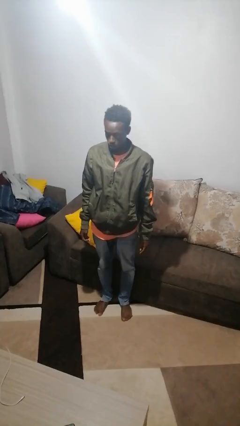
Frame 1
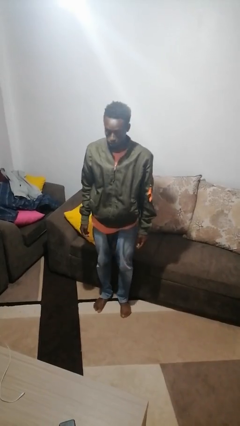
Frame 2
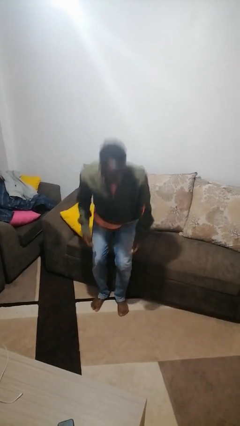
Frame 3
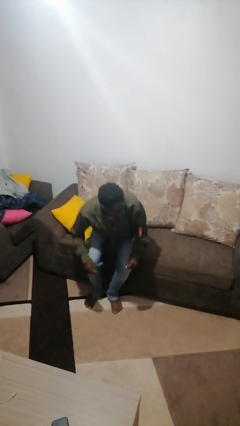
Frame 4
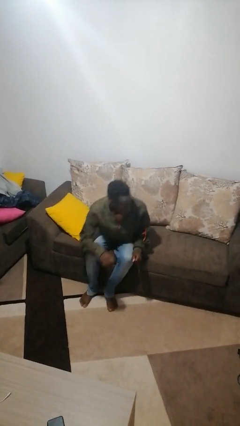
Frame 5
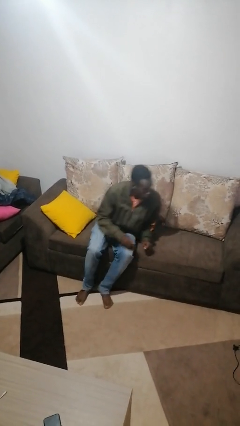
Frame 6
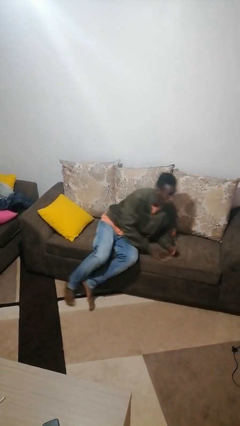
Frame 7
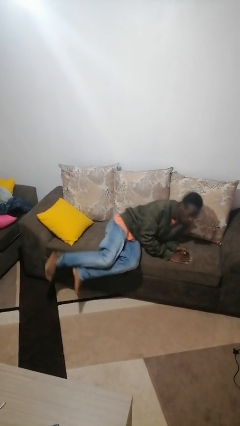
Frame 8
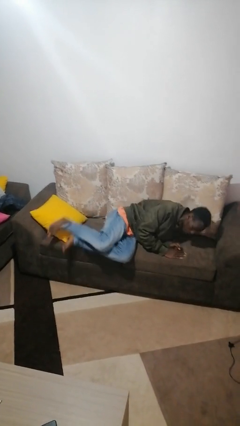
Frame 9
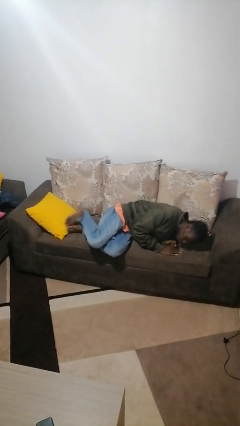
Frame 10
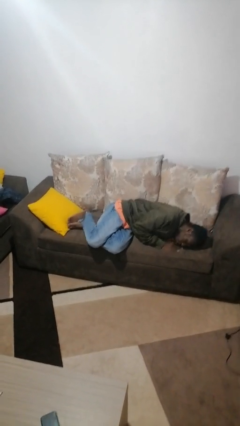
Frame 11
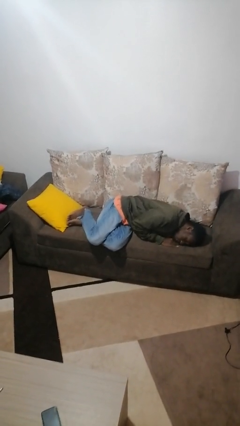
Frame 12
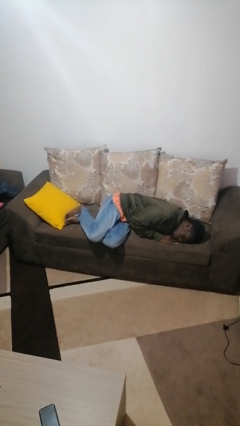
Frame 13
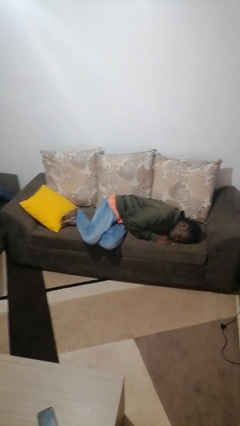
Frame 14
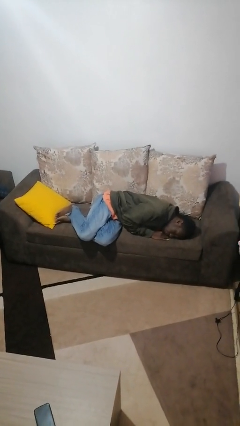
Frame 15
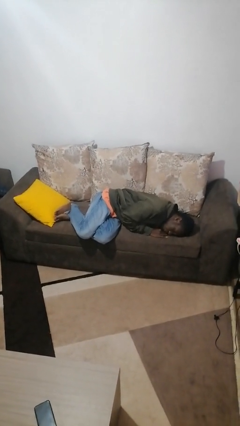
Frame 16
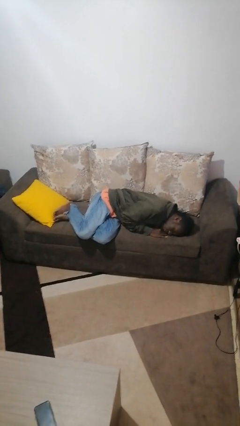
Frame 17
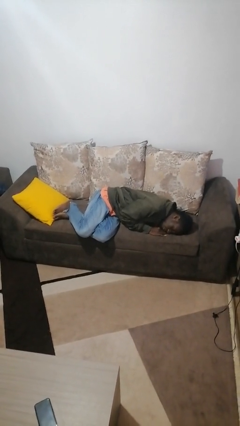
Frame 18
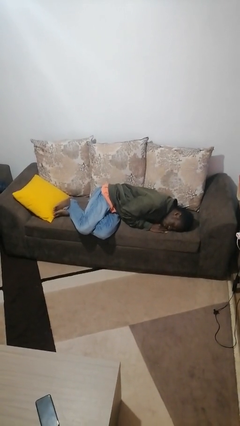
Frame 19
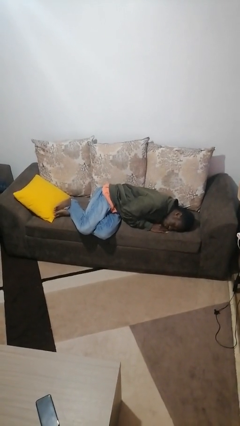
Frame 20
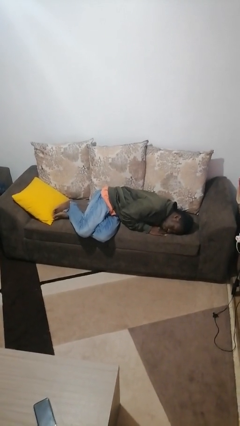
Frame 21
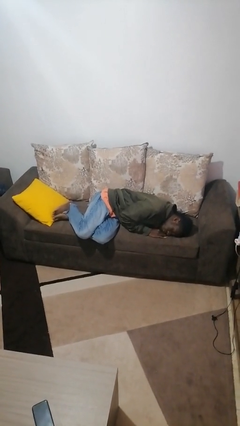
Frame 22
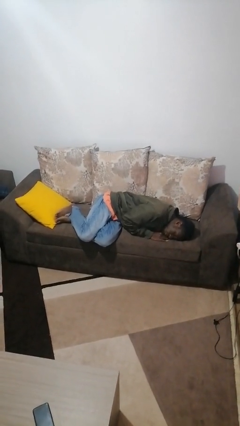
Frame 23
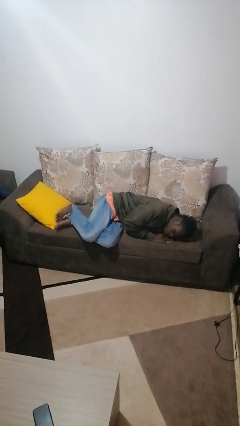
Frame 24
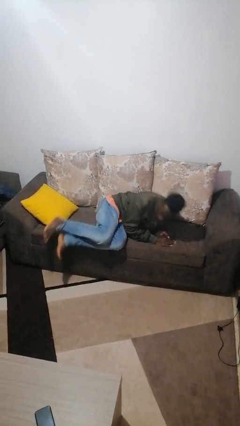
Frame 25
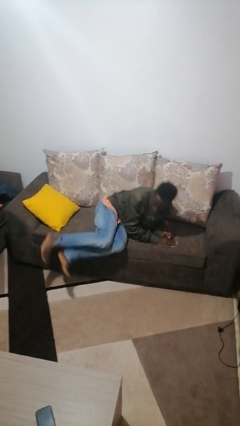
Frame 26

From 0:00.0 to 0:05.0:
person lies down on couch

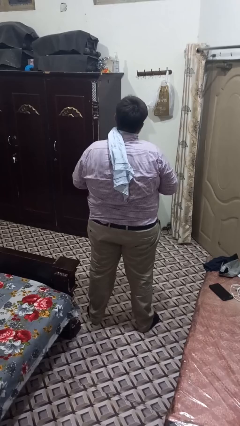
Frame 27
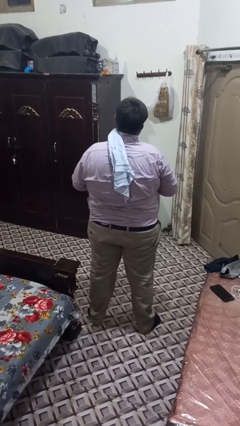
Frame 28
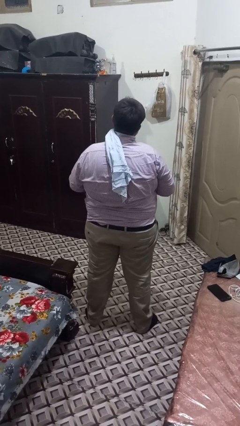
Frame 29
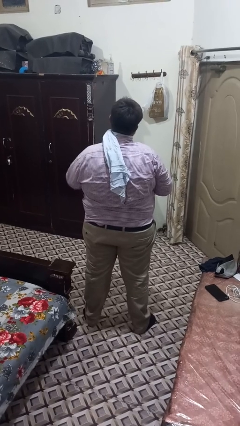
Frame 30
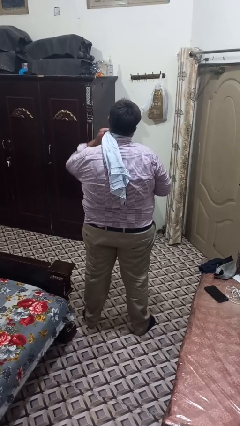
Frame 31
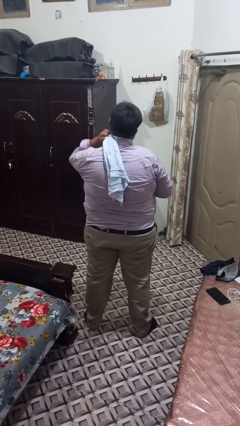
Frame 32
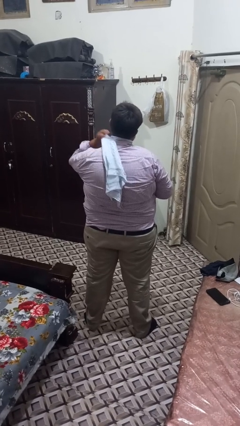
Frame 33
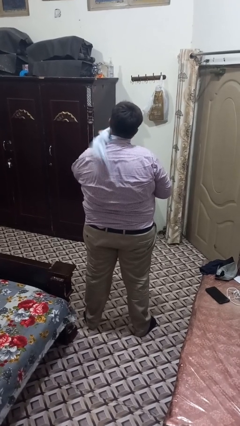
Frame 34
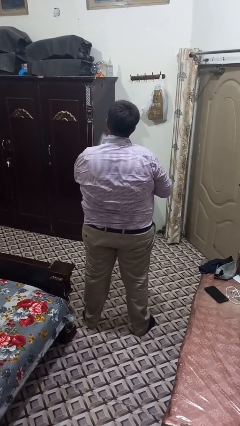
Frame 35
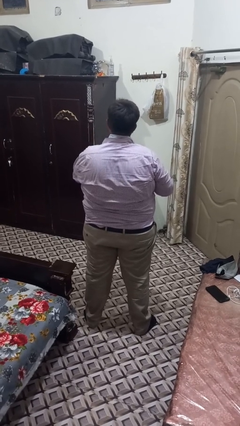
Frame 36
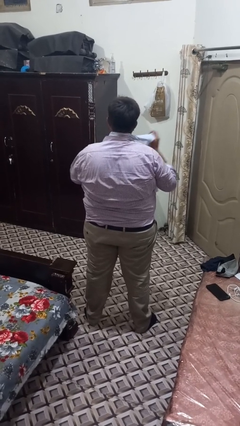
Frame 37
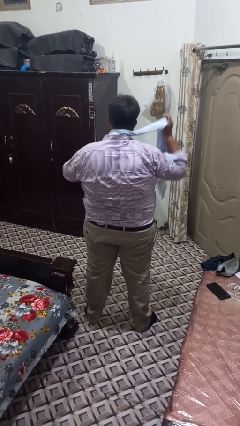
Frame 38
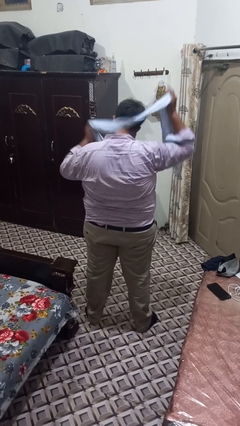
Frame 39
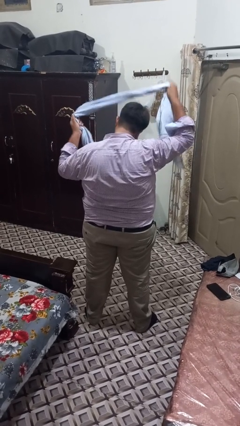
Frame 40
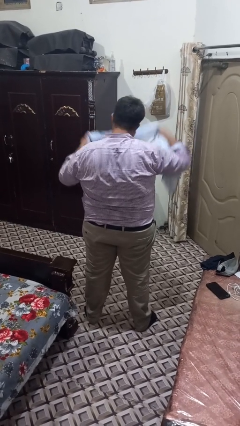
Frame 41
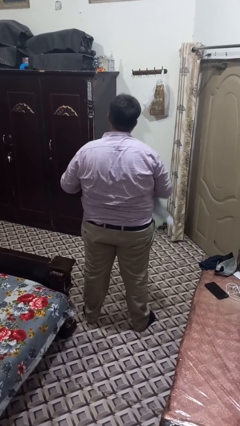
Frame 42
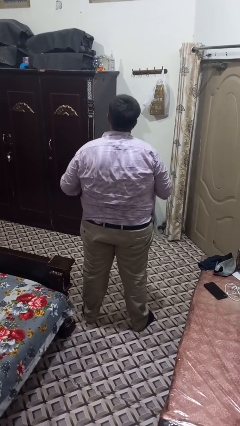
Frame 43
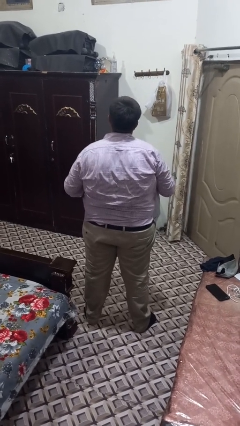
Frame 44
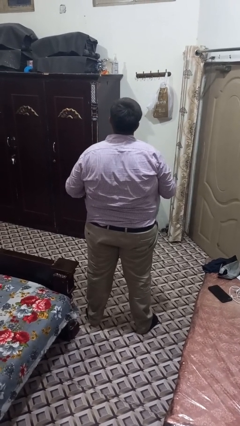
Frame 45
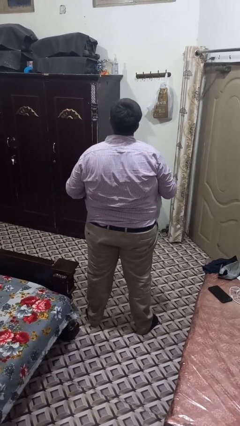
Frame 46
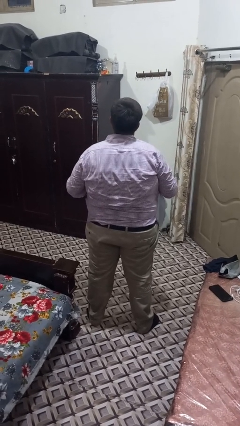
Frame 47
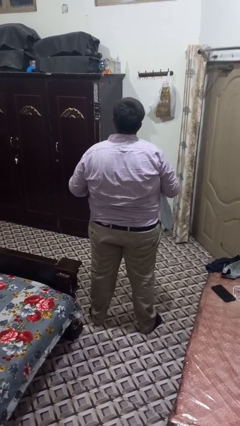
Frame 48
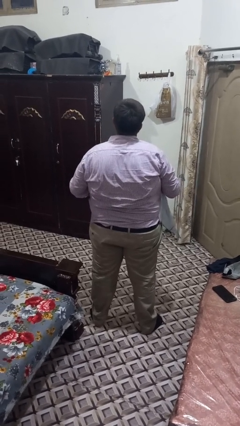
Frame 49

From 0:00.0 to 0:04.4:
person takes off scarf

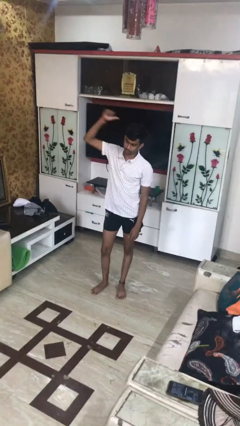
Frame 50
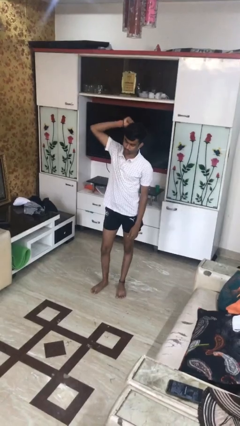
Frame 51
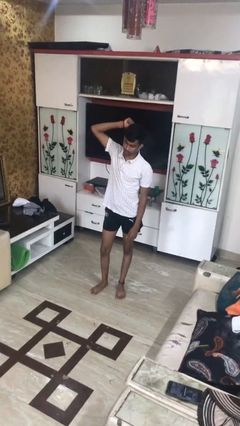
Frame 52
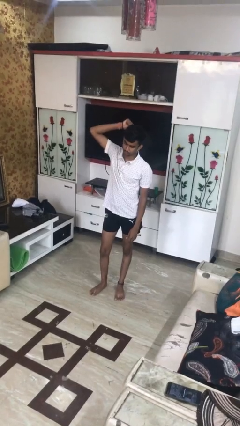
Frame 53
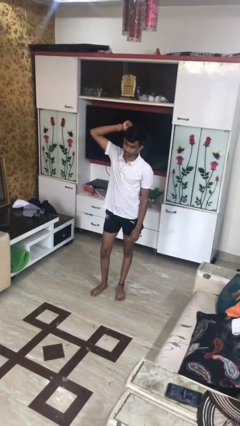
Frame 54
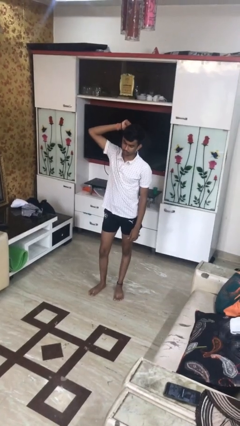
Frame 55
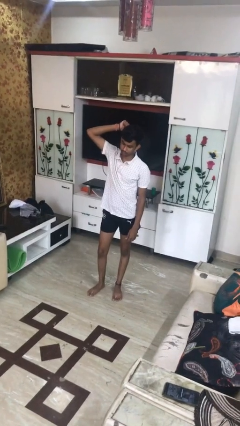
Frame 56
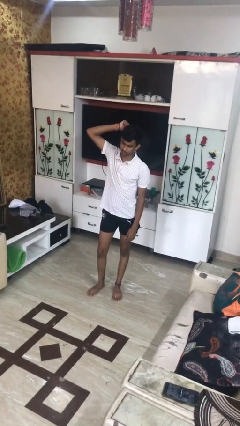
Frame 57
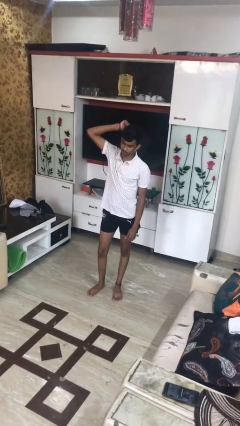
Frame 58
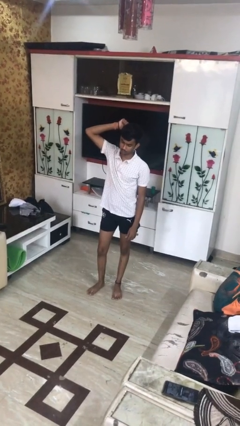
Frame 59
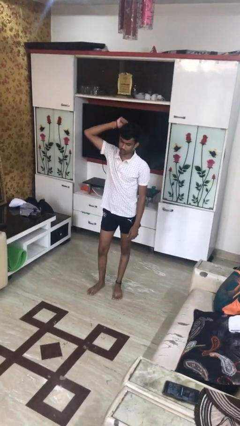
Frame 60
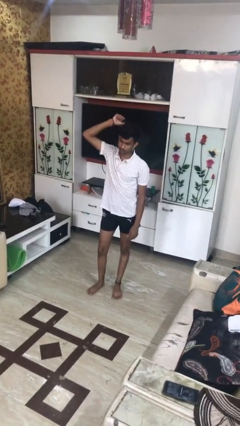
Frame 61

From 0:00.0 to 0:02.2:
person gestures behind me

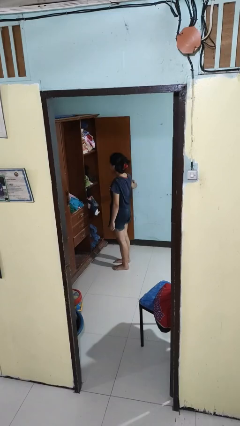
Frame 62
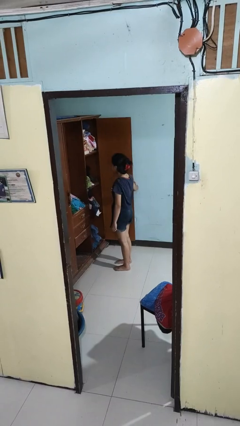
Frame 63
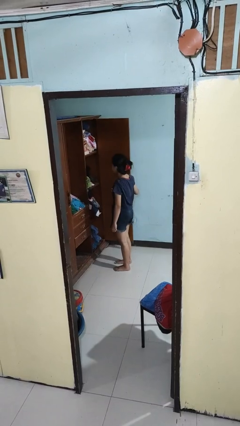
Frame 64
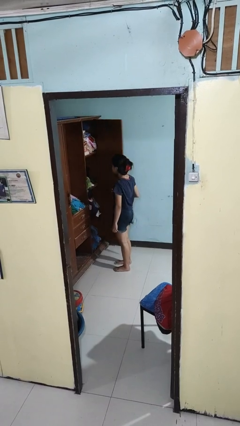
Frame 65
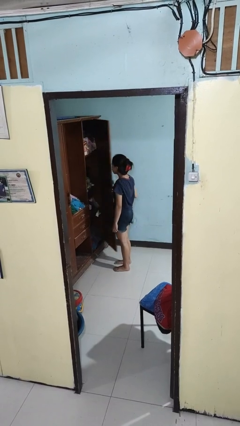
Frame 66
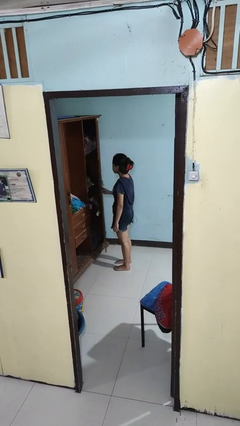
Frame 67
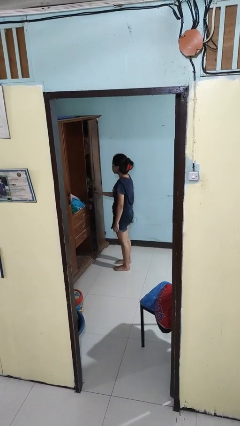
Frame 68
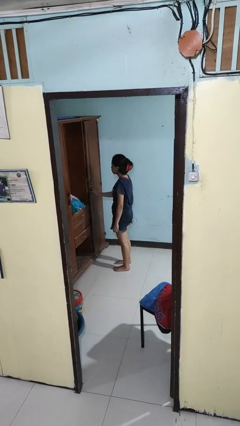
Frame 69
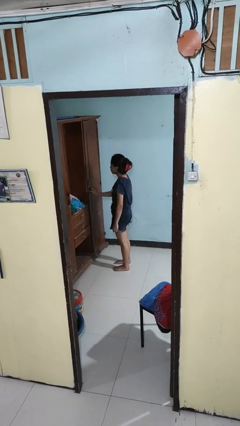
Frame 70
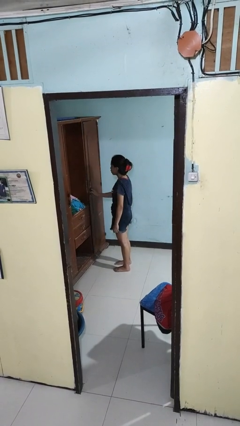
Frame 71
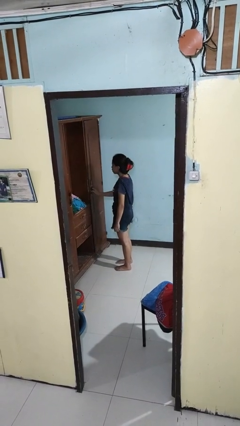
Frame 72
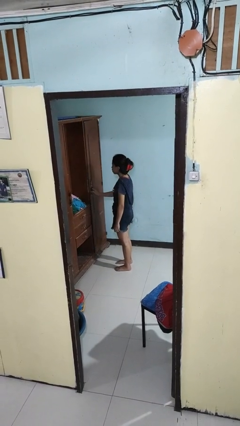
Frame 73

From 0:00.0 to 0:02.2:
person closes closet door

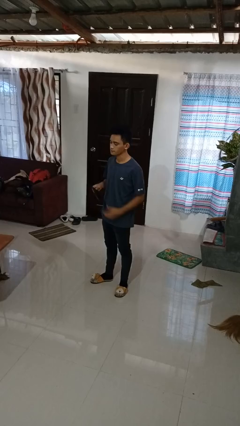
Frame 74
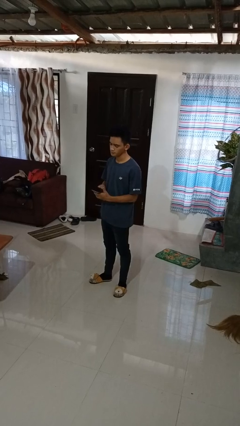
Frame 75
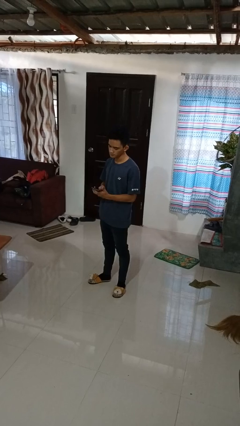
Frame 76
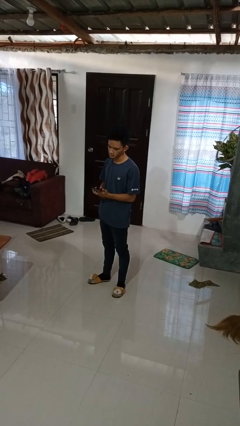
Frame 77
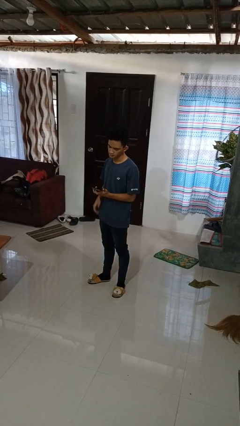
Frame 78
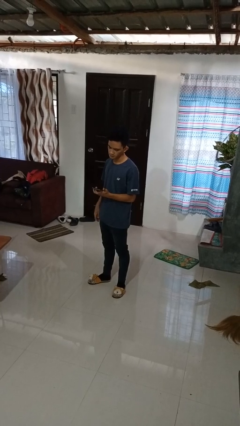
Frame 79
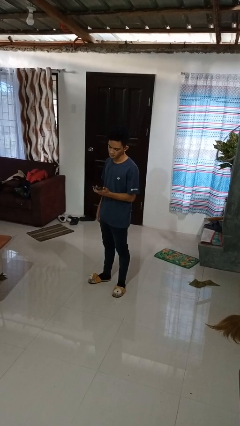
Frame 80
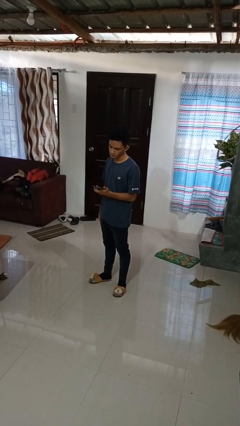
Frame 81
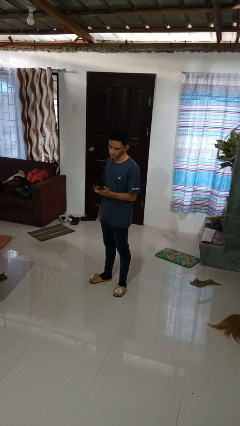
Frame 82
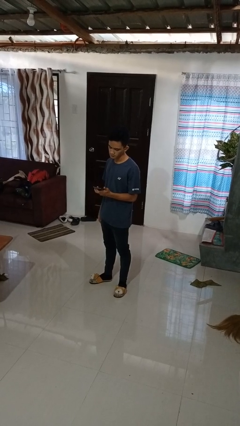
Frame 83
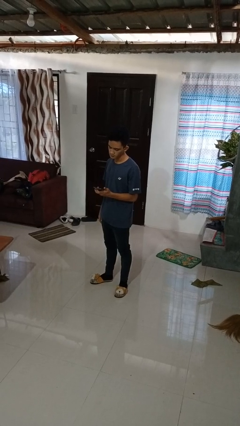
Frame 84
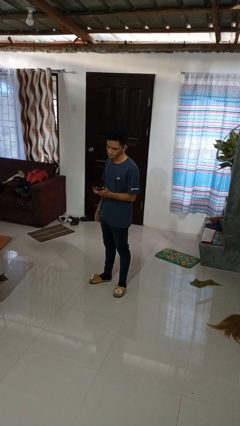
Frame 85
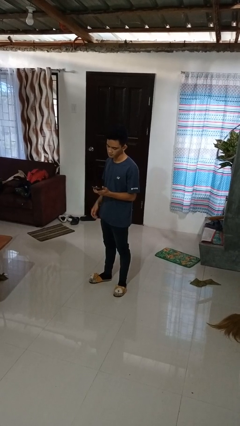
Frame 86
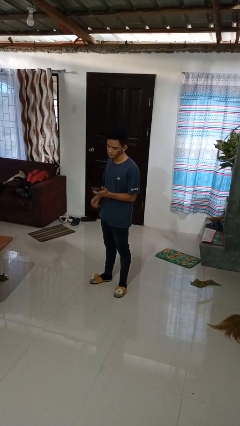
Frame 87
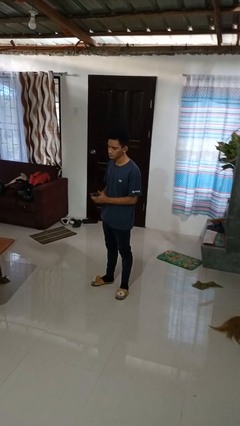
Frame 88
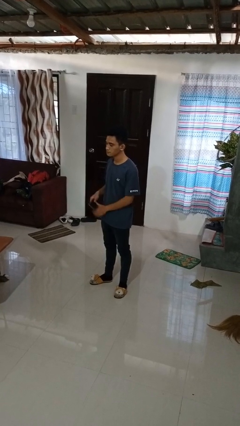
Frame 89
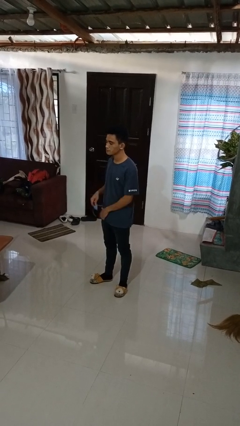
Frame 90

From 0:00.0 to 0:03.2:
person takes phone from pocket

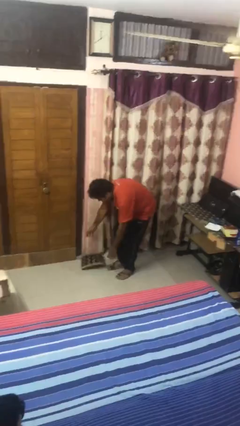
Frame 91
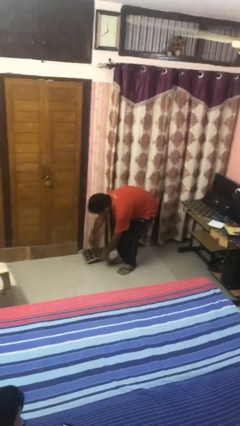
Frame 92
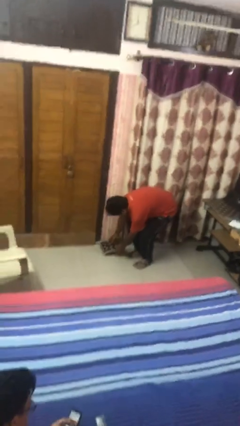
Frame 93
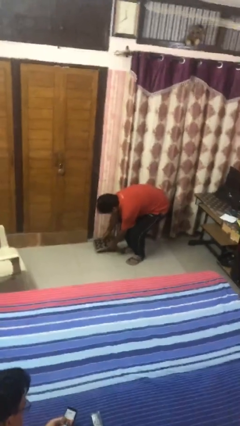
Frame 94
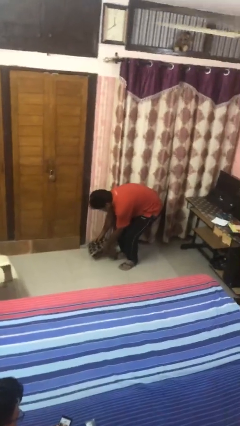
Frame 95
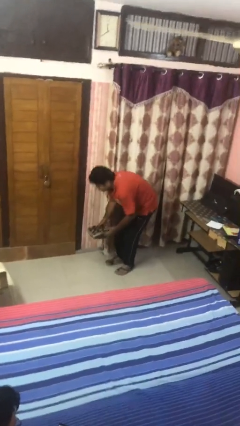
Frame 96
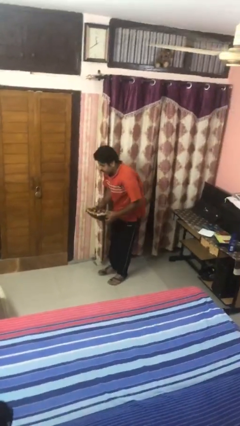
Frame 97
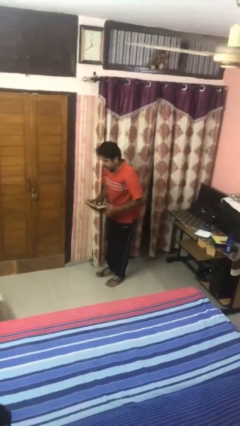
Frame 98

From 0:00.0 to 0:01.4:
person picks up object from floor
